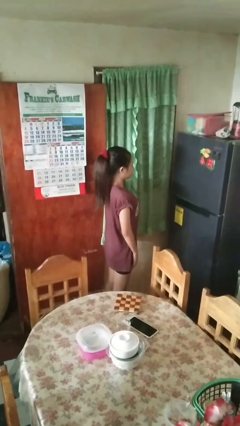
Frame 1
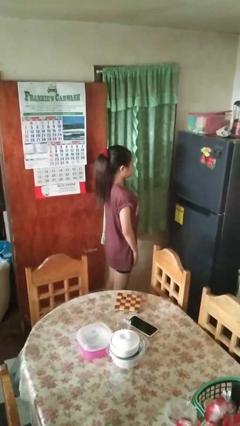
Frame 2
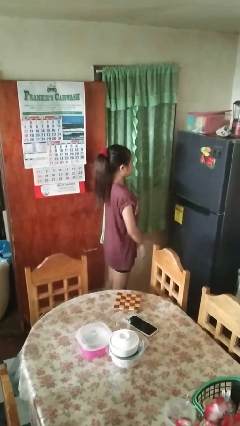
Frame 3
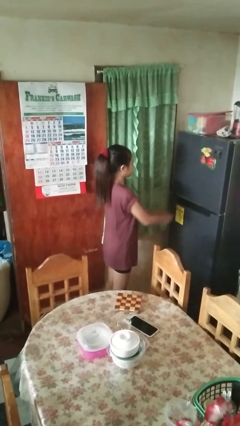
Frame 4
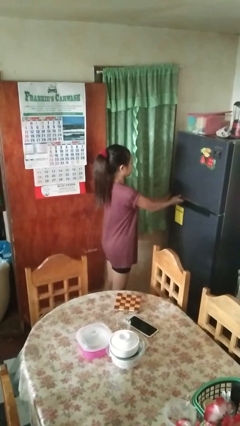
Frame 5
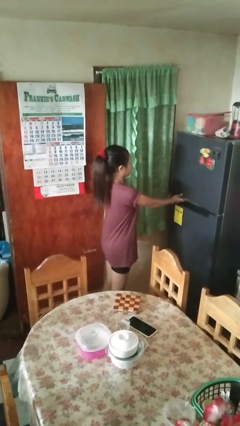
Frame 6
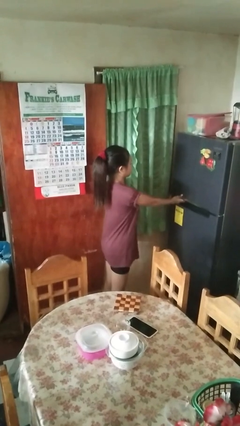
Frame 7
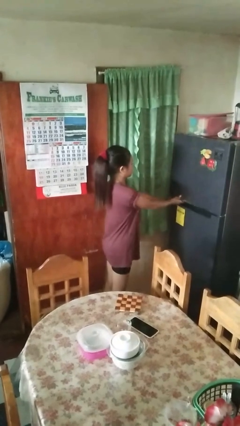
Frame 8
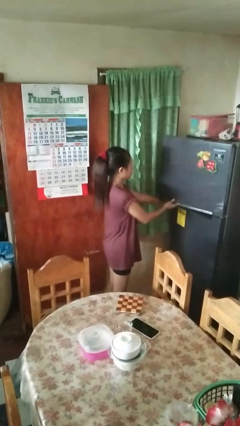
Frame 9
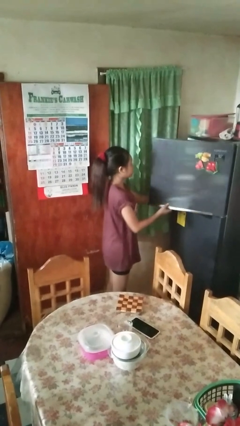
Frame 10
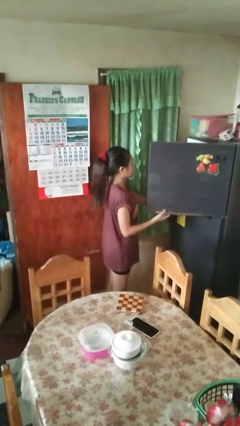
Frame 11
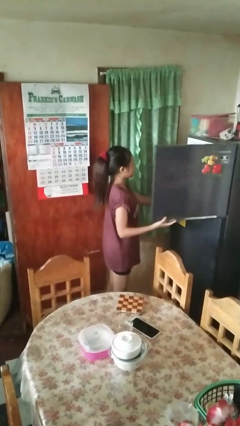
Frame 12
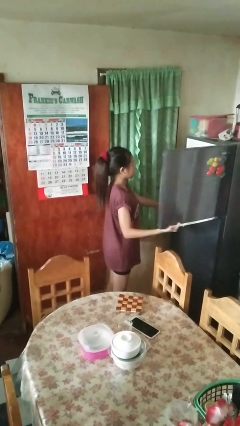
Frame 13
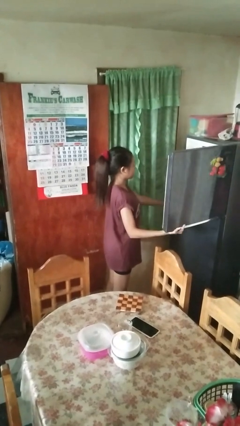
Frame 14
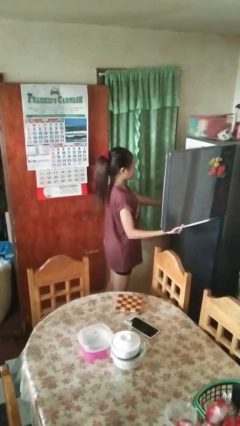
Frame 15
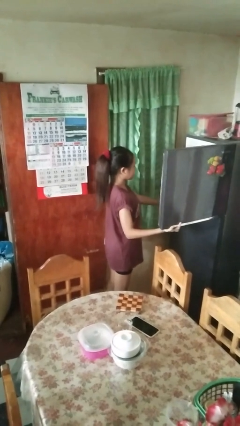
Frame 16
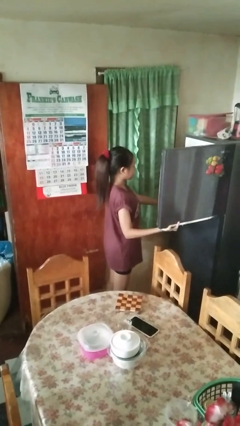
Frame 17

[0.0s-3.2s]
person opens refrigerator

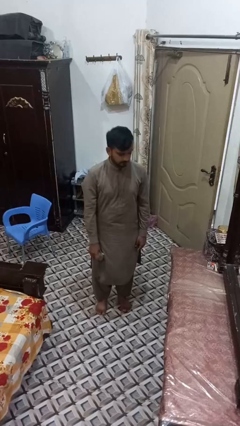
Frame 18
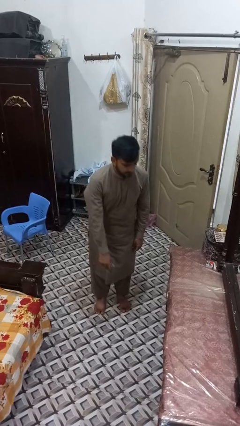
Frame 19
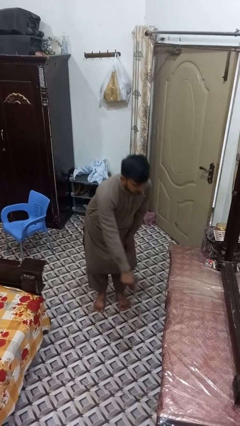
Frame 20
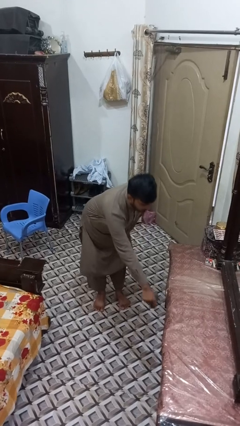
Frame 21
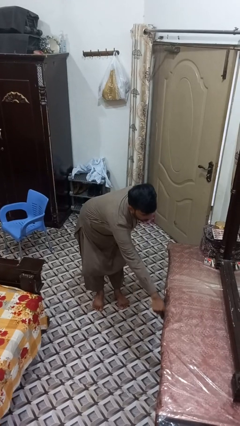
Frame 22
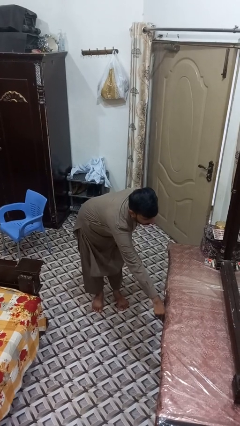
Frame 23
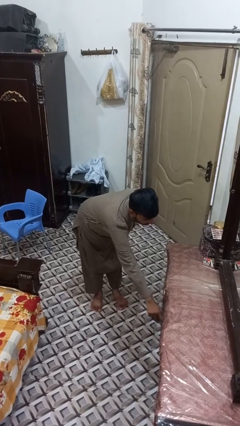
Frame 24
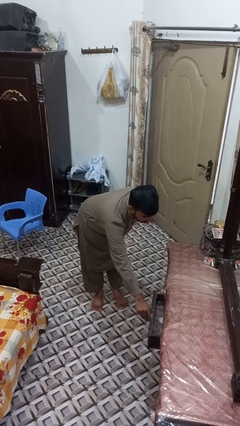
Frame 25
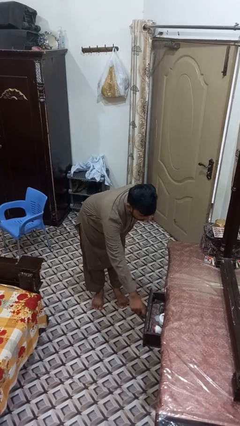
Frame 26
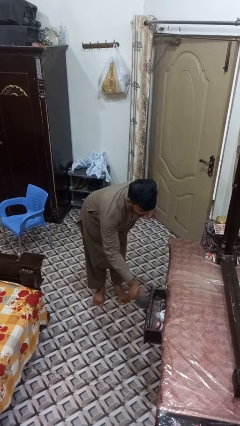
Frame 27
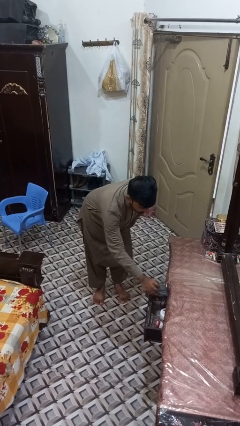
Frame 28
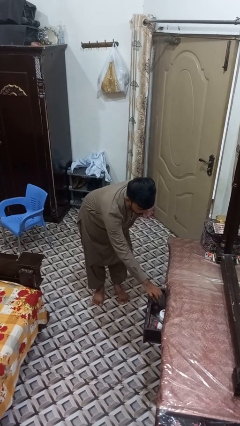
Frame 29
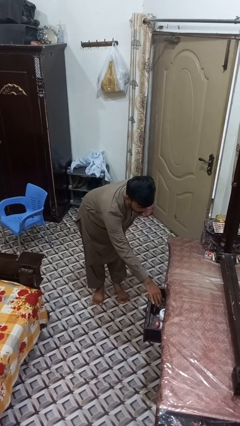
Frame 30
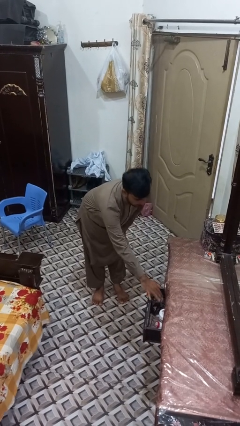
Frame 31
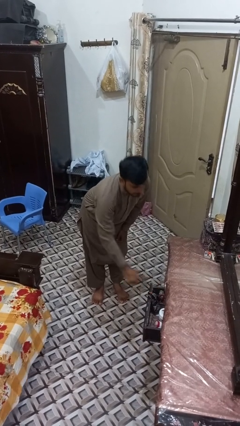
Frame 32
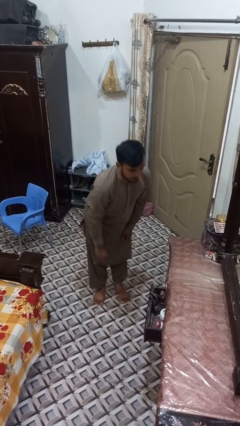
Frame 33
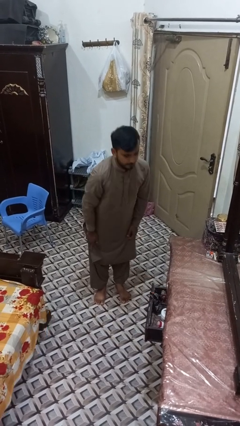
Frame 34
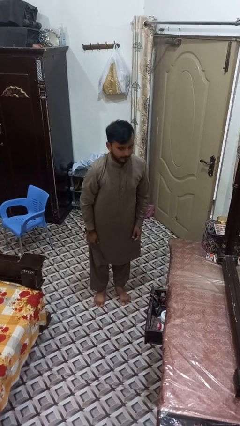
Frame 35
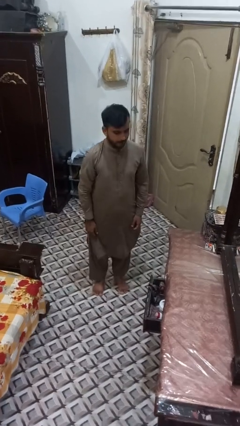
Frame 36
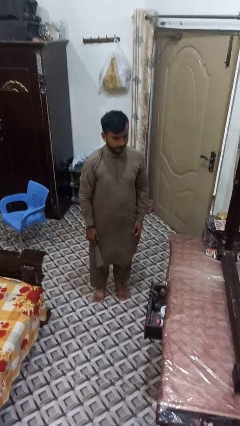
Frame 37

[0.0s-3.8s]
person puts clothes into dresser

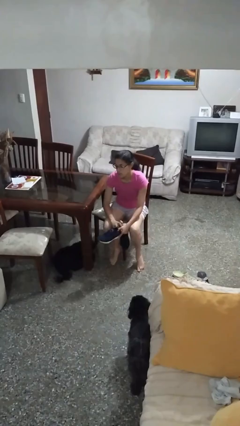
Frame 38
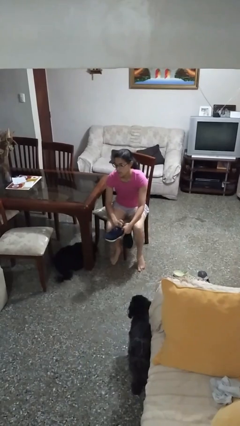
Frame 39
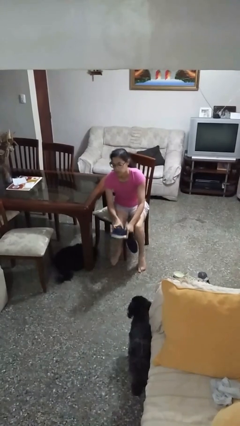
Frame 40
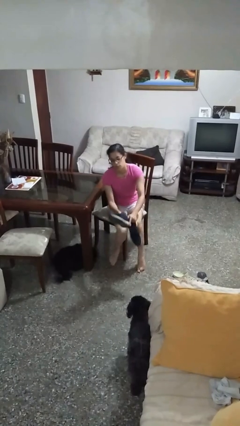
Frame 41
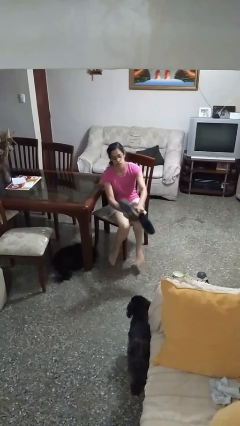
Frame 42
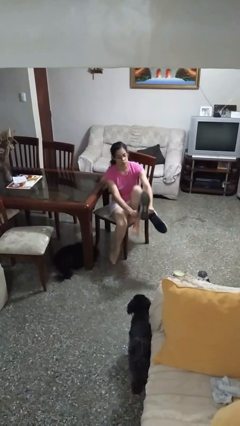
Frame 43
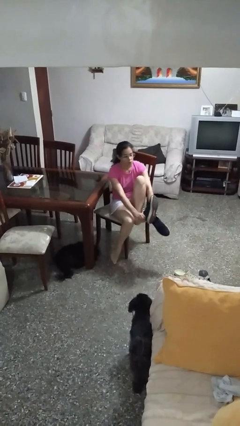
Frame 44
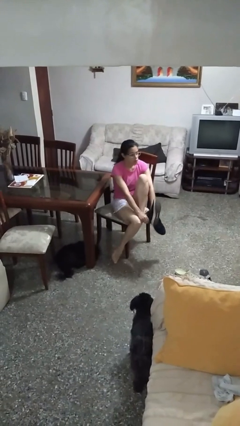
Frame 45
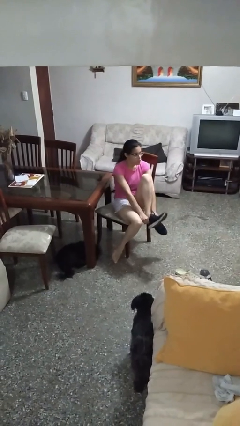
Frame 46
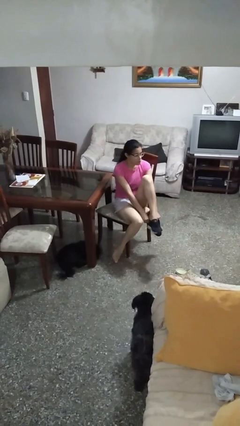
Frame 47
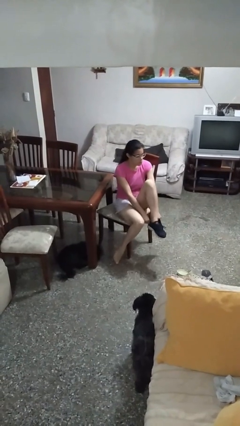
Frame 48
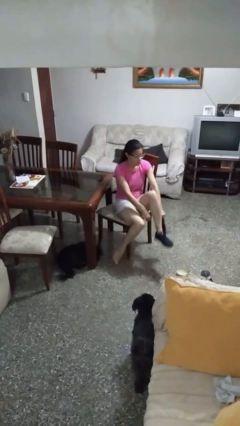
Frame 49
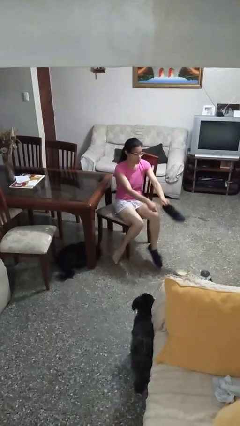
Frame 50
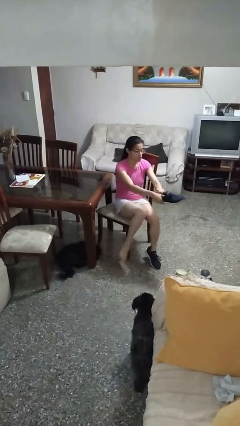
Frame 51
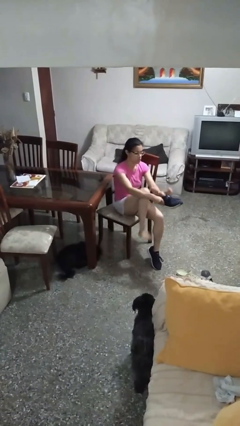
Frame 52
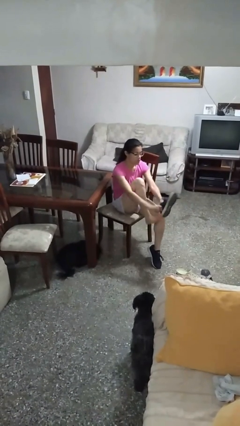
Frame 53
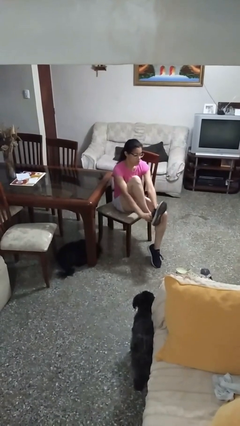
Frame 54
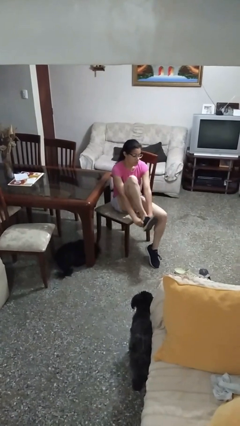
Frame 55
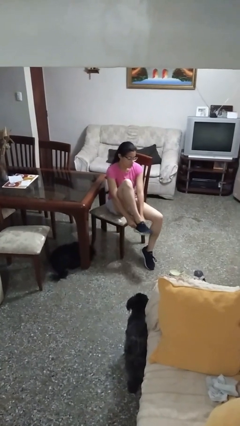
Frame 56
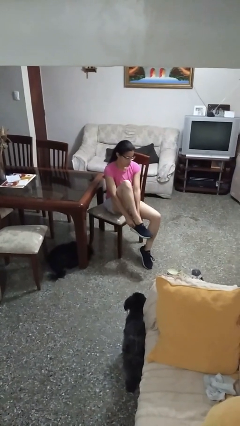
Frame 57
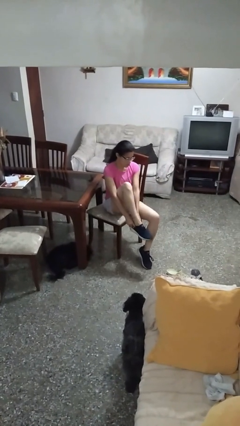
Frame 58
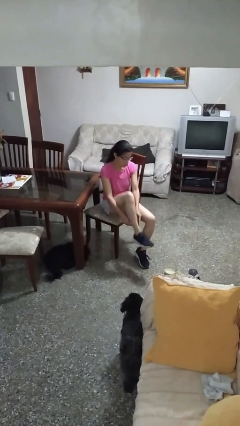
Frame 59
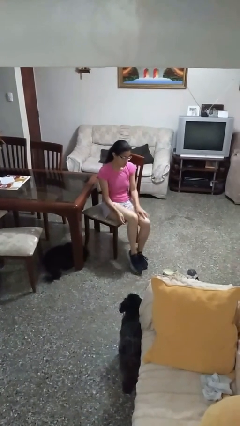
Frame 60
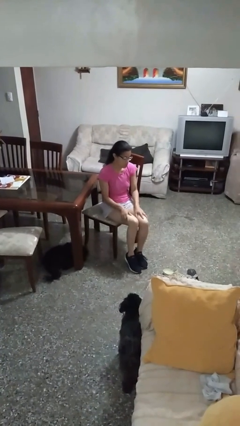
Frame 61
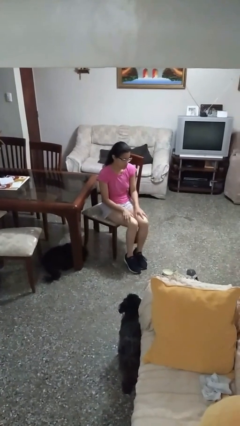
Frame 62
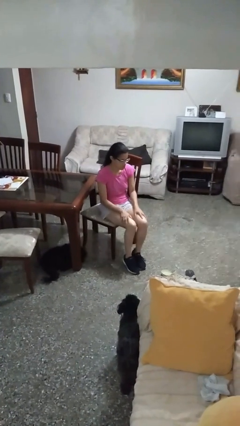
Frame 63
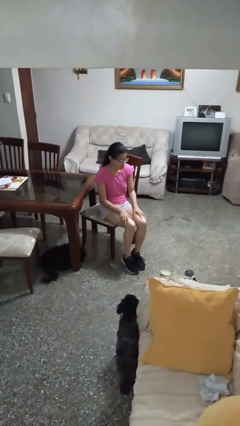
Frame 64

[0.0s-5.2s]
person puts on shoes

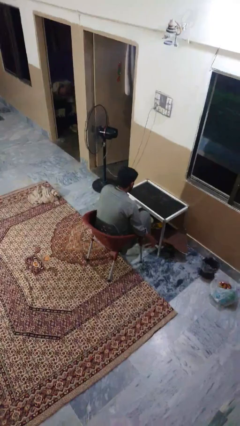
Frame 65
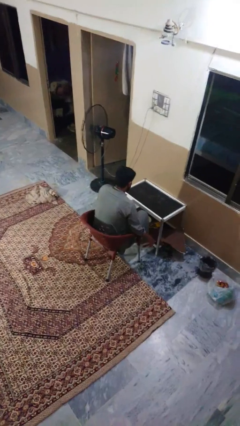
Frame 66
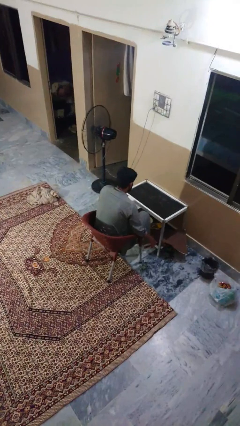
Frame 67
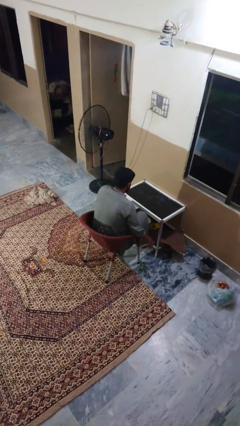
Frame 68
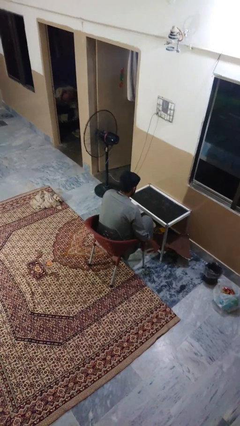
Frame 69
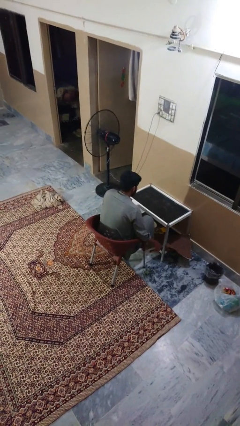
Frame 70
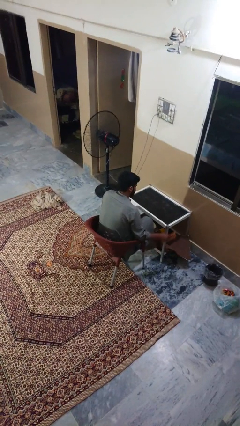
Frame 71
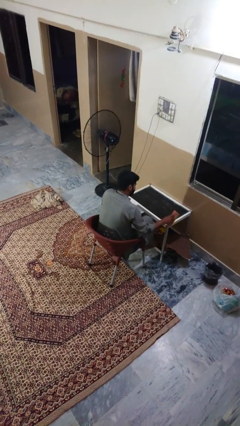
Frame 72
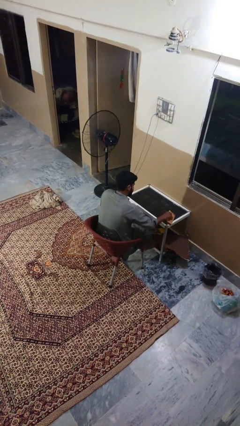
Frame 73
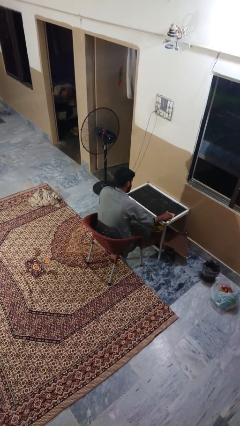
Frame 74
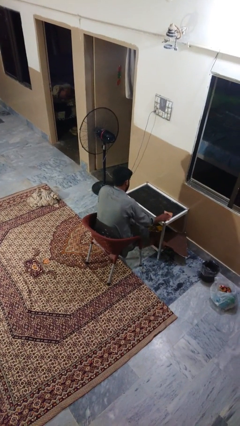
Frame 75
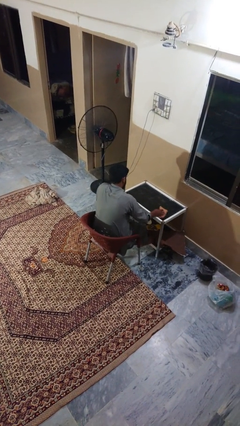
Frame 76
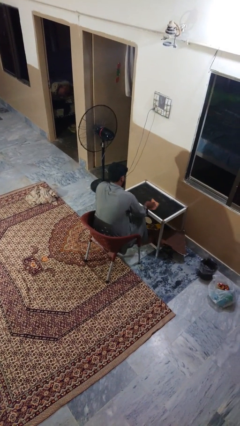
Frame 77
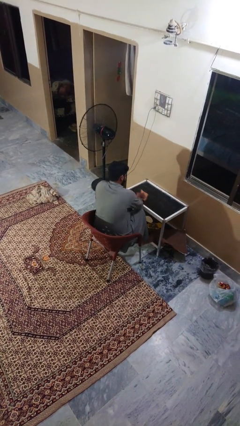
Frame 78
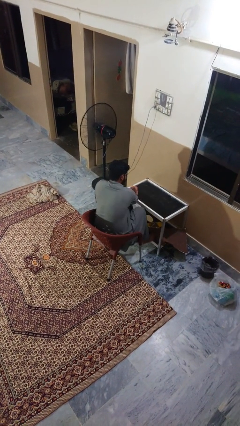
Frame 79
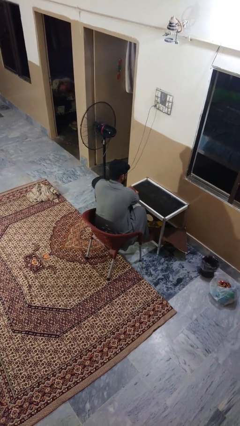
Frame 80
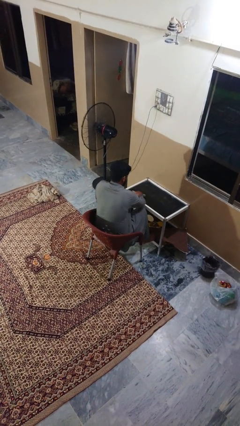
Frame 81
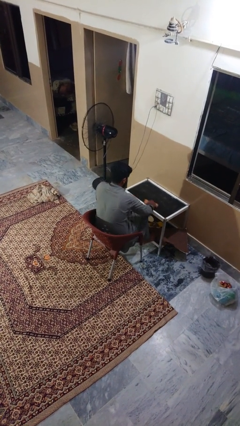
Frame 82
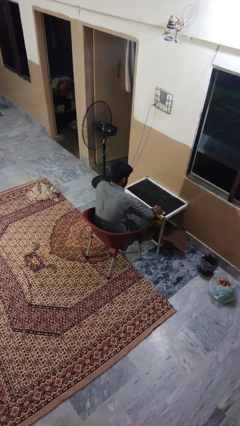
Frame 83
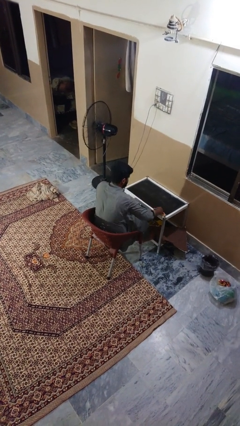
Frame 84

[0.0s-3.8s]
person cleans table with rag

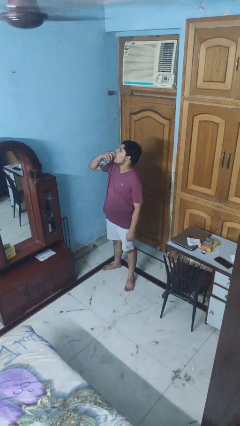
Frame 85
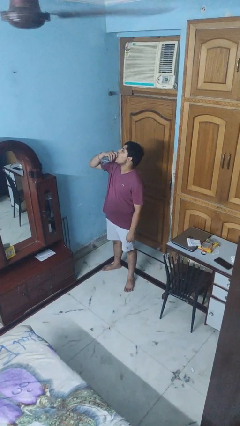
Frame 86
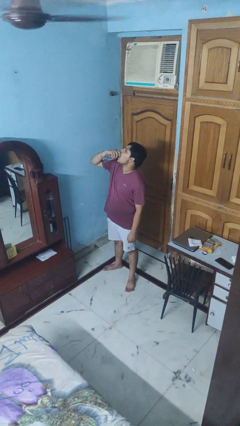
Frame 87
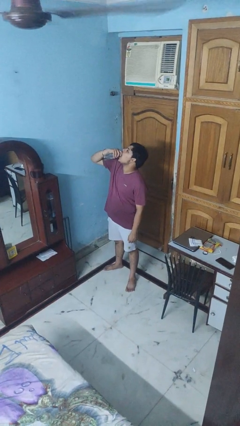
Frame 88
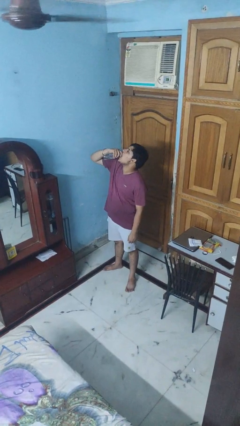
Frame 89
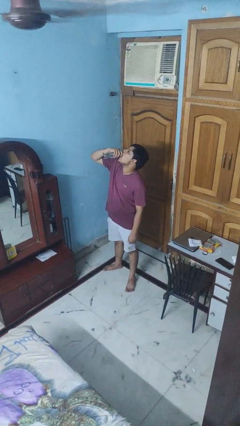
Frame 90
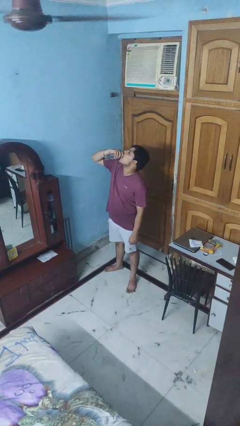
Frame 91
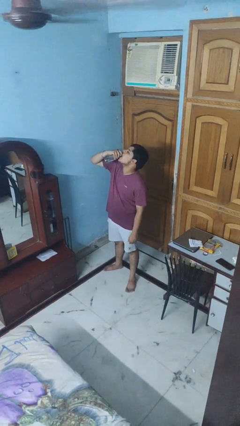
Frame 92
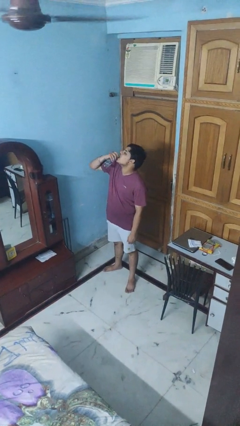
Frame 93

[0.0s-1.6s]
person drinks from bottle

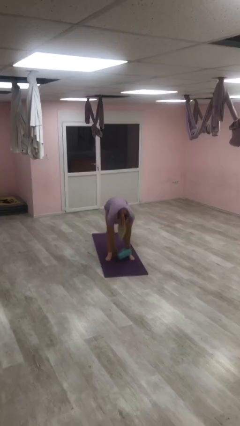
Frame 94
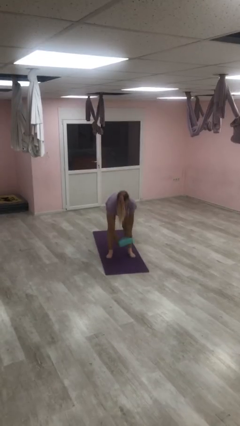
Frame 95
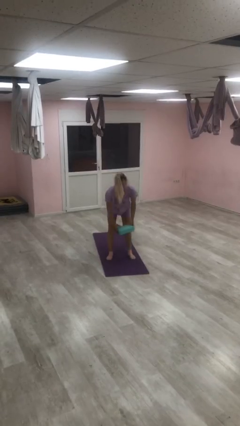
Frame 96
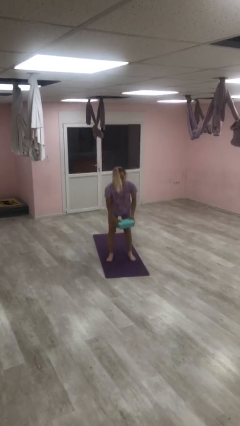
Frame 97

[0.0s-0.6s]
person picks up object from floor
